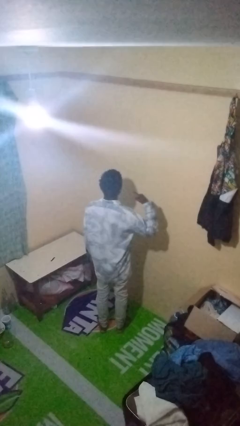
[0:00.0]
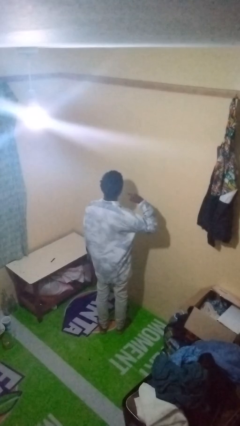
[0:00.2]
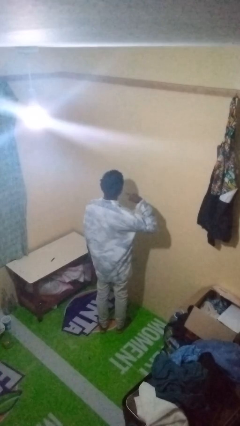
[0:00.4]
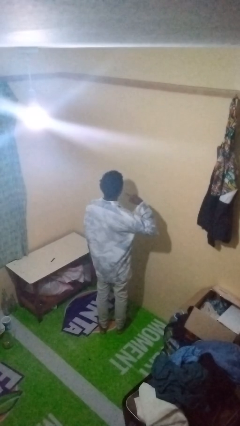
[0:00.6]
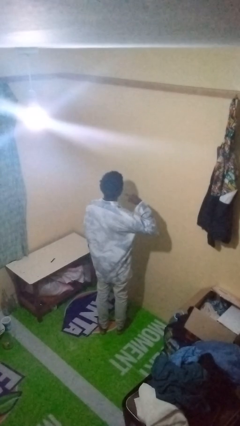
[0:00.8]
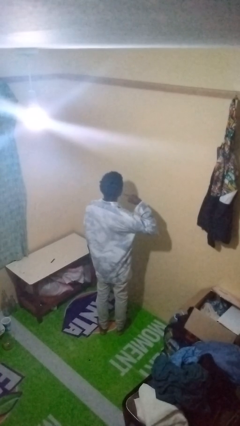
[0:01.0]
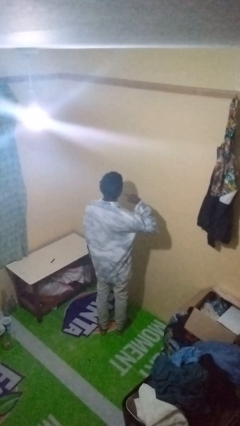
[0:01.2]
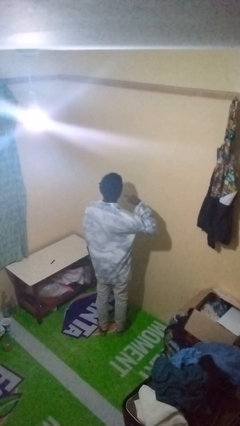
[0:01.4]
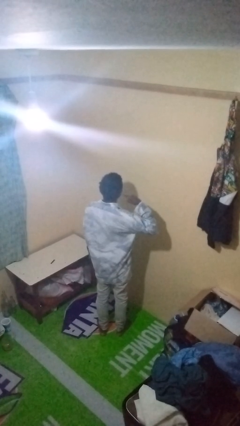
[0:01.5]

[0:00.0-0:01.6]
person gestures listen closely

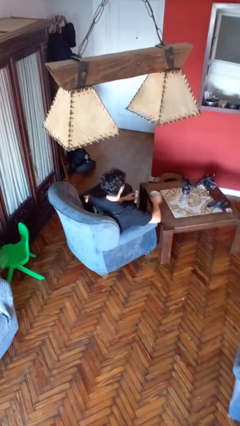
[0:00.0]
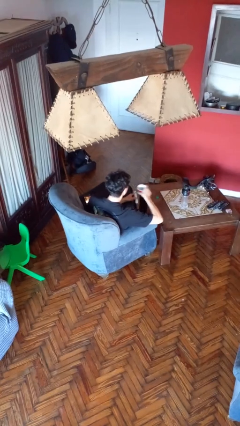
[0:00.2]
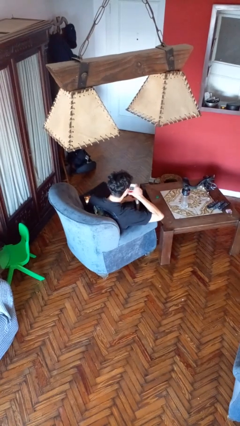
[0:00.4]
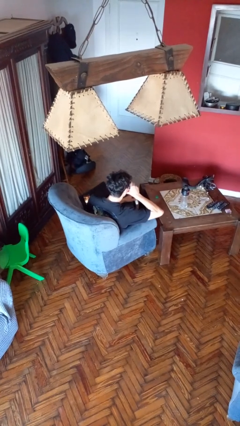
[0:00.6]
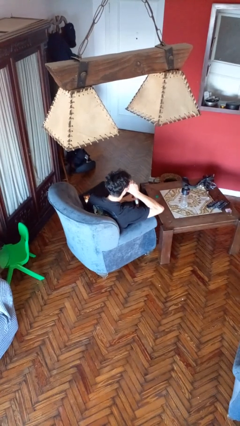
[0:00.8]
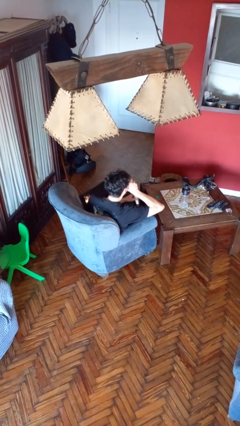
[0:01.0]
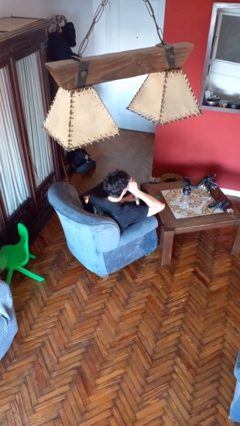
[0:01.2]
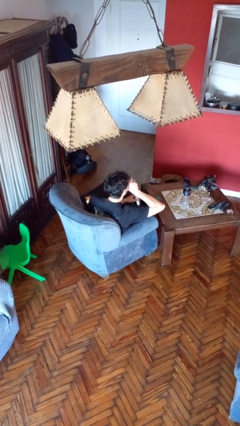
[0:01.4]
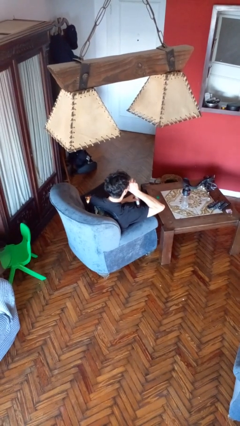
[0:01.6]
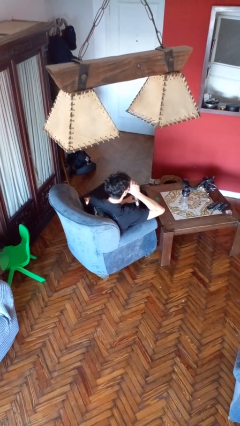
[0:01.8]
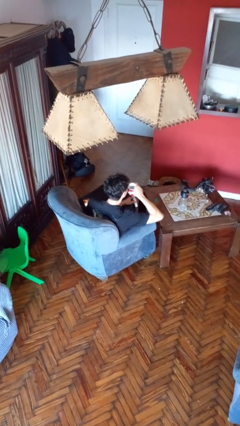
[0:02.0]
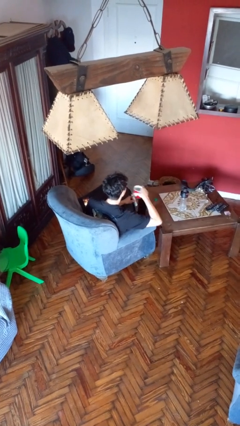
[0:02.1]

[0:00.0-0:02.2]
person drinks from cup

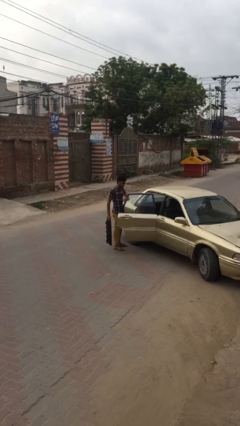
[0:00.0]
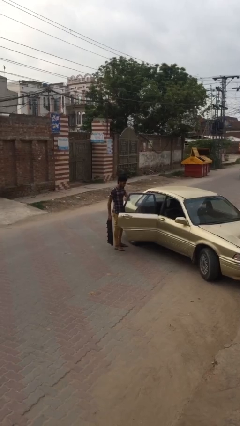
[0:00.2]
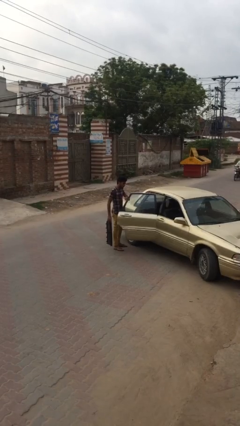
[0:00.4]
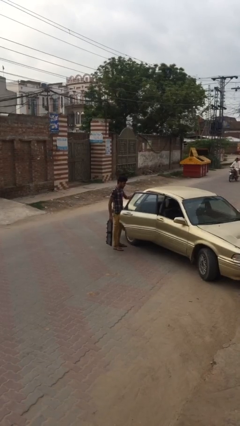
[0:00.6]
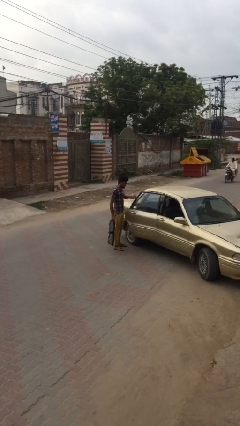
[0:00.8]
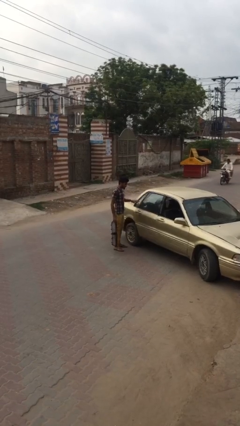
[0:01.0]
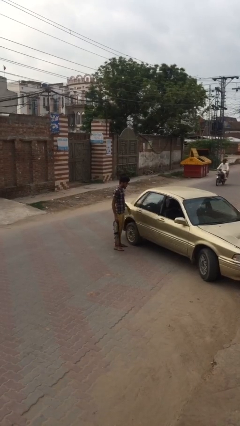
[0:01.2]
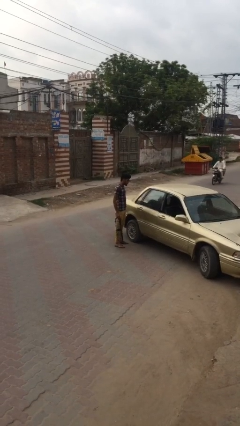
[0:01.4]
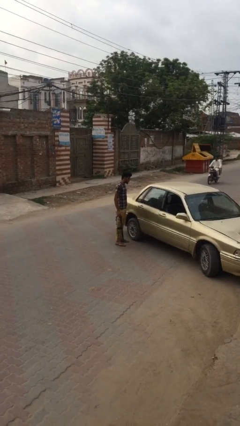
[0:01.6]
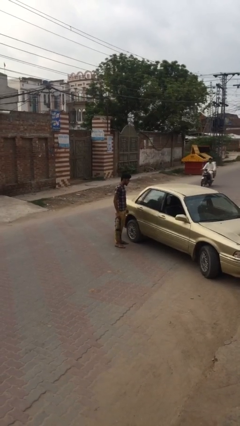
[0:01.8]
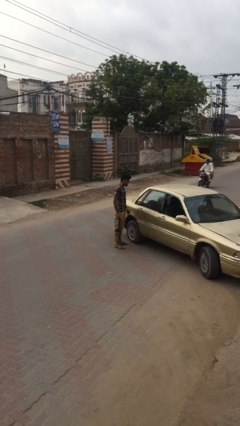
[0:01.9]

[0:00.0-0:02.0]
person closes car door

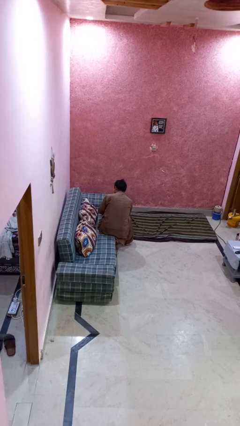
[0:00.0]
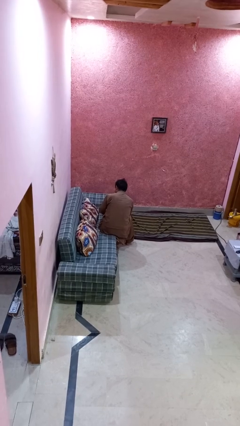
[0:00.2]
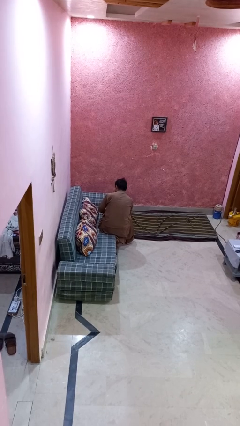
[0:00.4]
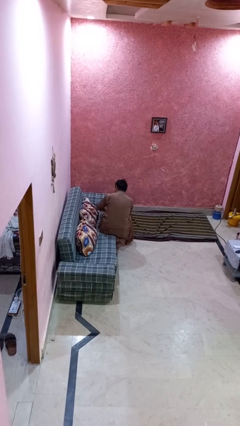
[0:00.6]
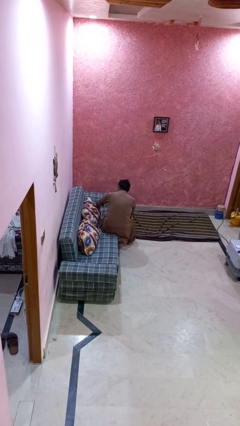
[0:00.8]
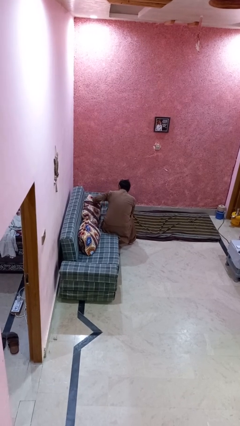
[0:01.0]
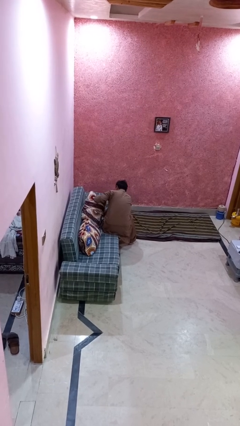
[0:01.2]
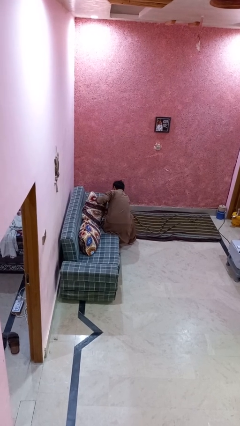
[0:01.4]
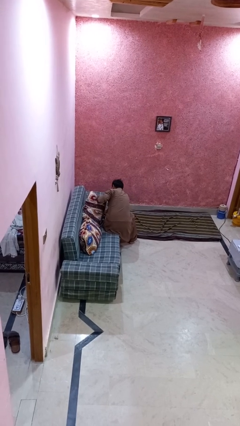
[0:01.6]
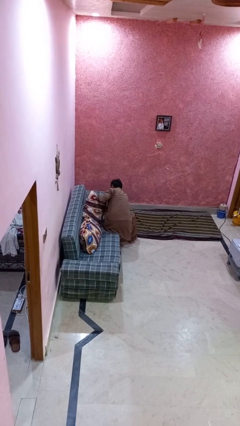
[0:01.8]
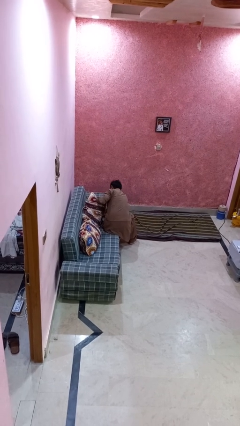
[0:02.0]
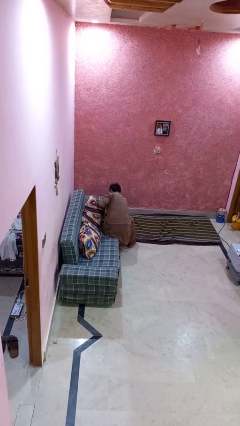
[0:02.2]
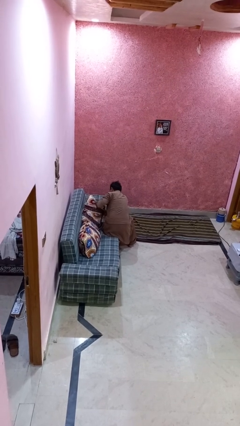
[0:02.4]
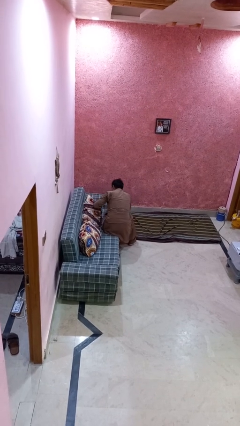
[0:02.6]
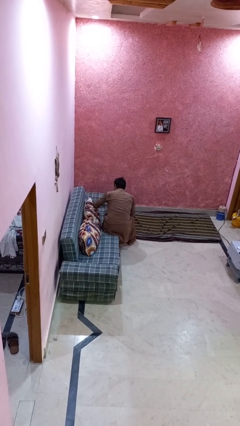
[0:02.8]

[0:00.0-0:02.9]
person searches in couch

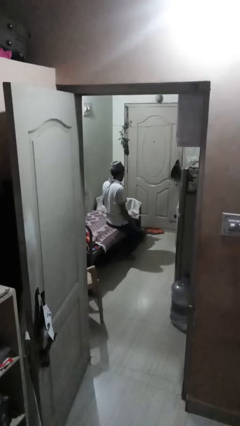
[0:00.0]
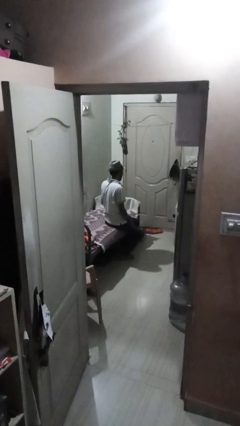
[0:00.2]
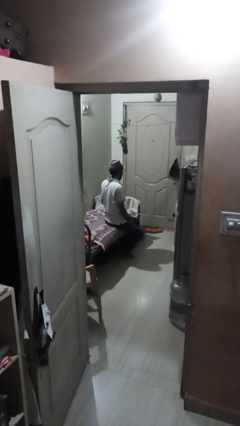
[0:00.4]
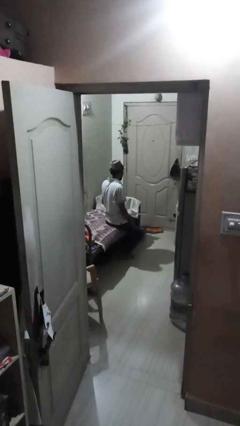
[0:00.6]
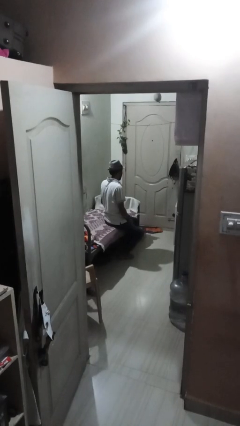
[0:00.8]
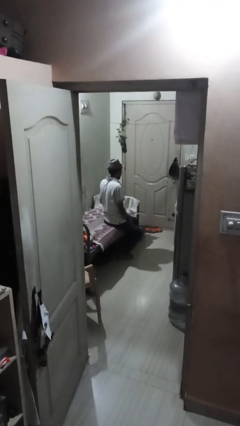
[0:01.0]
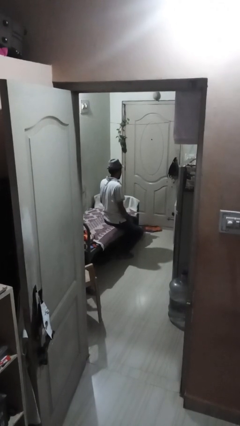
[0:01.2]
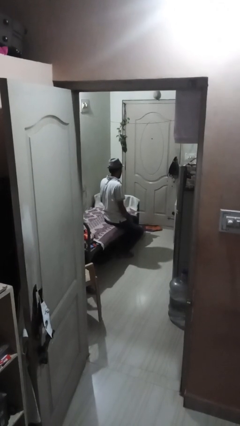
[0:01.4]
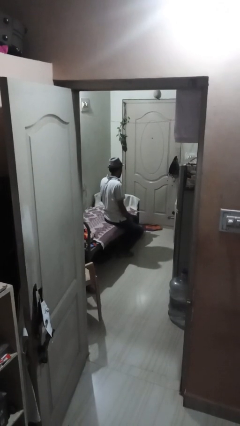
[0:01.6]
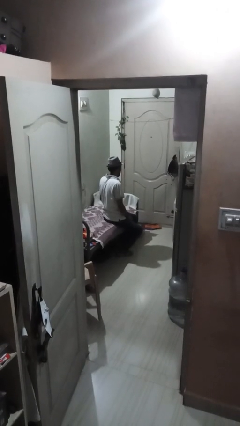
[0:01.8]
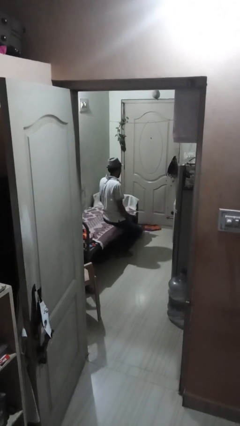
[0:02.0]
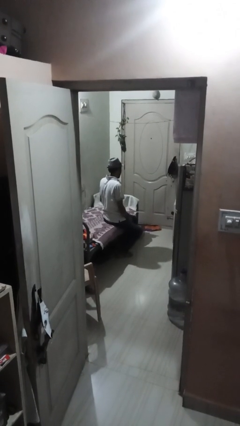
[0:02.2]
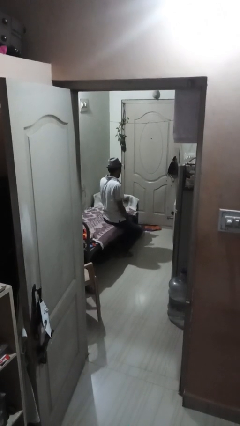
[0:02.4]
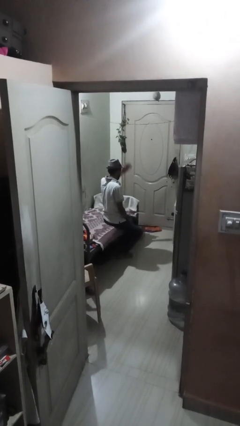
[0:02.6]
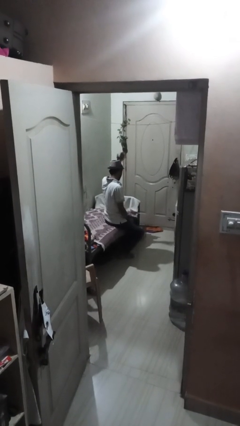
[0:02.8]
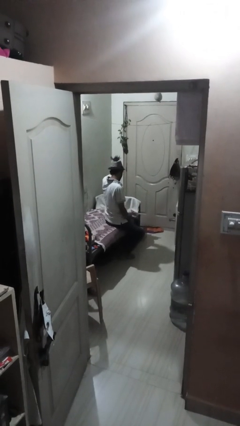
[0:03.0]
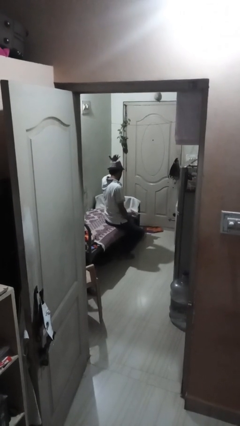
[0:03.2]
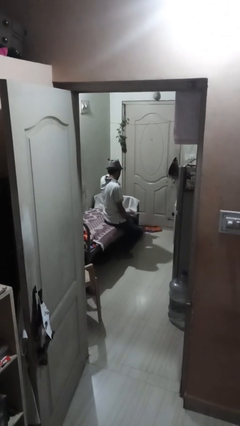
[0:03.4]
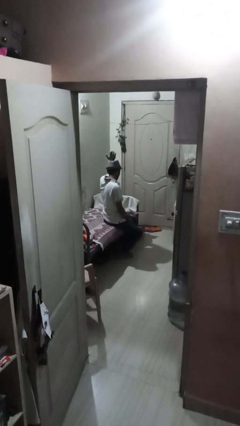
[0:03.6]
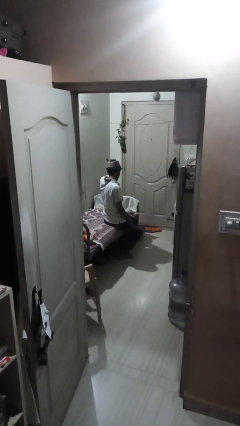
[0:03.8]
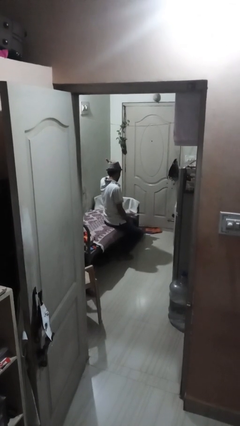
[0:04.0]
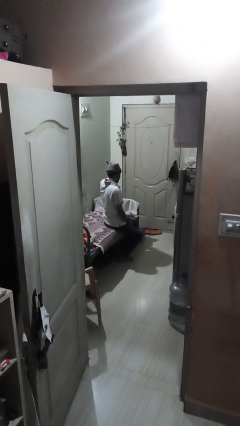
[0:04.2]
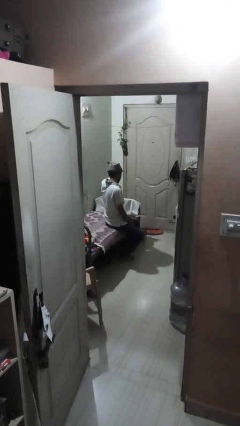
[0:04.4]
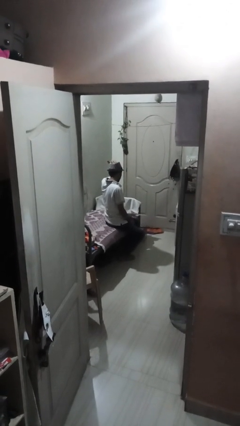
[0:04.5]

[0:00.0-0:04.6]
person pats head

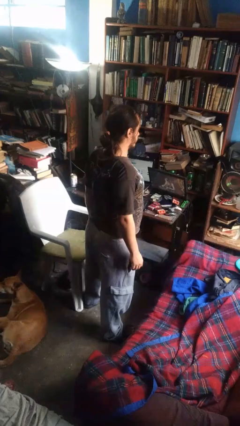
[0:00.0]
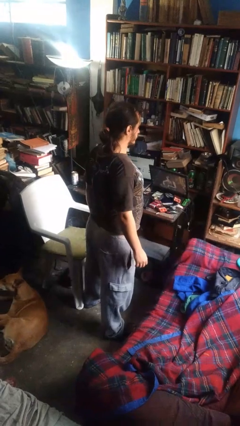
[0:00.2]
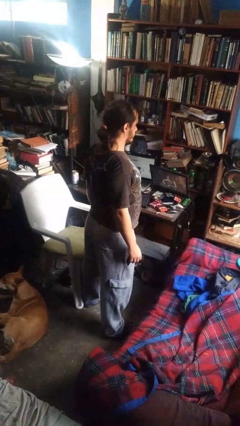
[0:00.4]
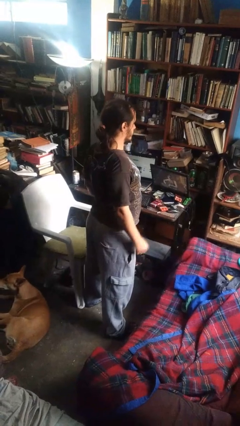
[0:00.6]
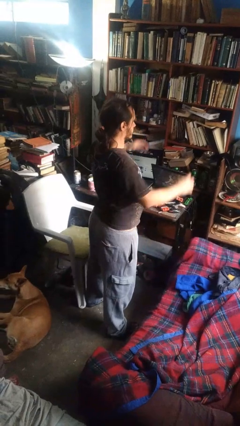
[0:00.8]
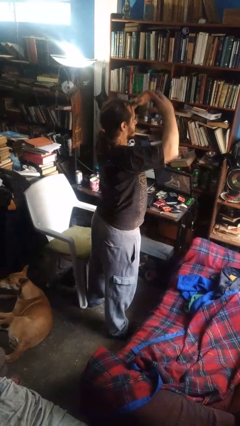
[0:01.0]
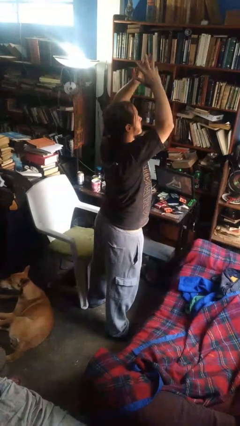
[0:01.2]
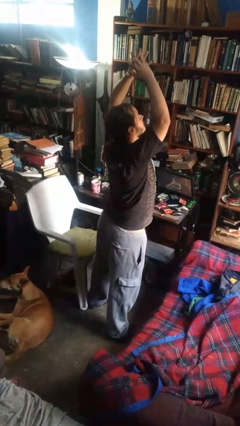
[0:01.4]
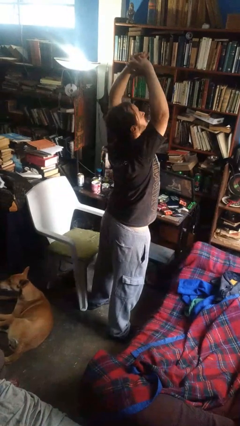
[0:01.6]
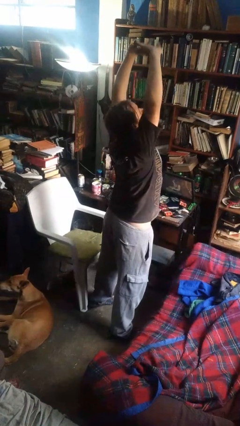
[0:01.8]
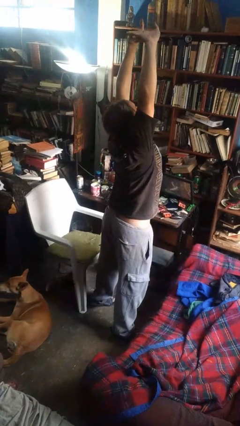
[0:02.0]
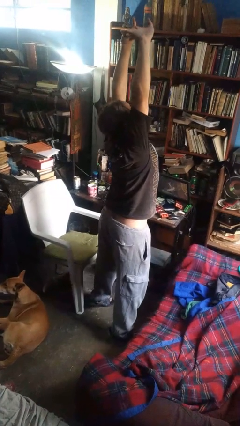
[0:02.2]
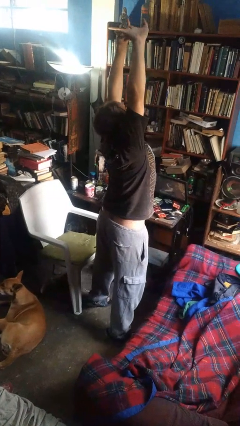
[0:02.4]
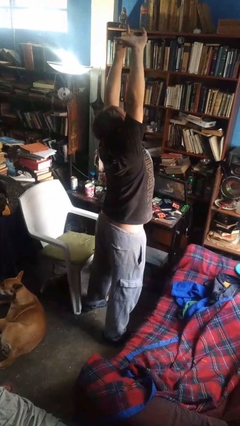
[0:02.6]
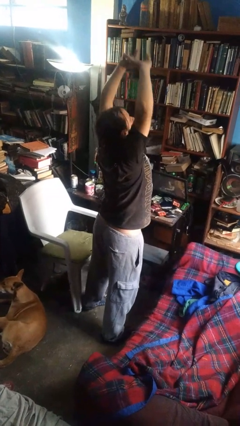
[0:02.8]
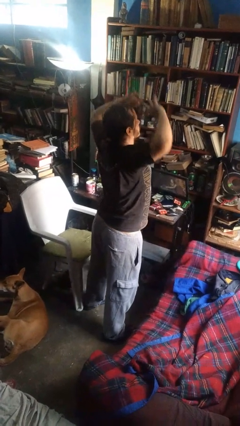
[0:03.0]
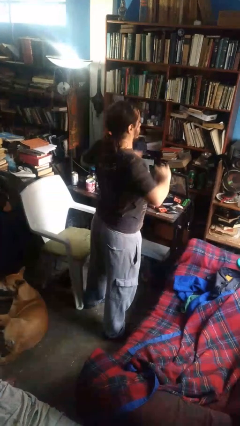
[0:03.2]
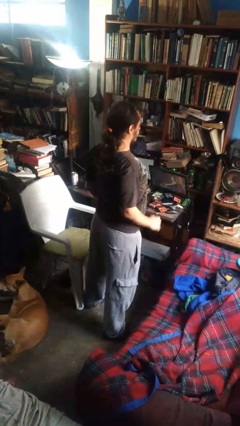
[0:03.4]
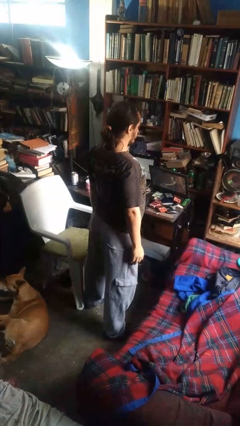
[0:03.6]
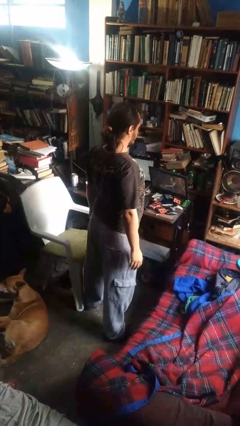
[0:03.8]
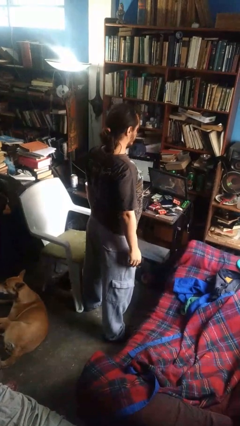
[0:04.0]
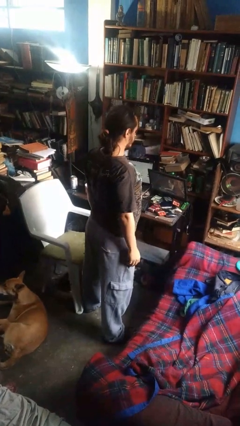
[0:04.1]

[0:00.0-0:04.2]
person stretches arms over head
